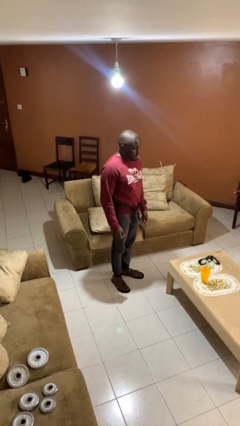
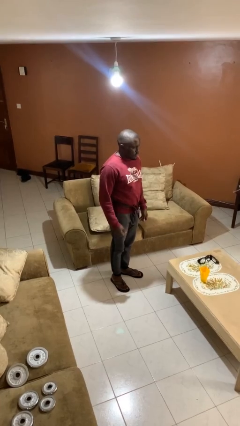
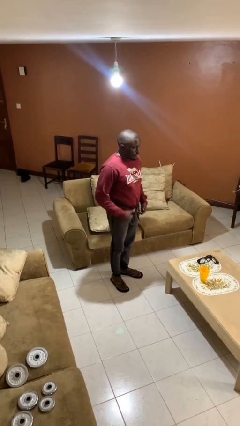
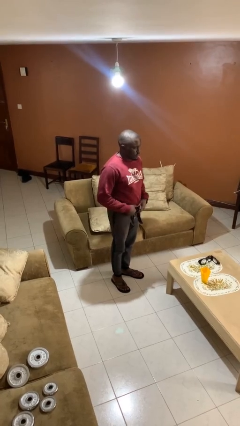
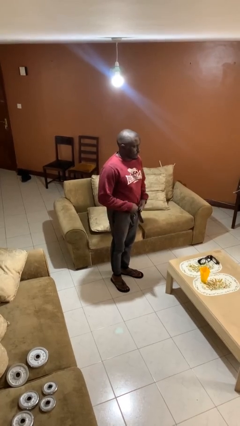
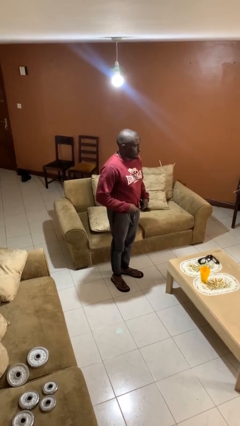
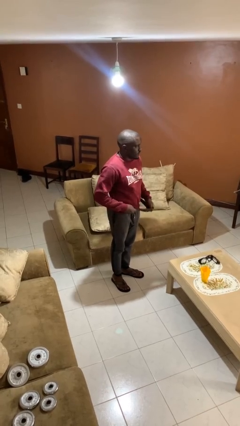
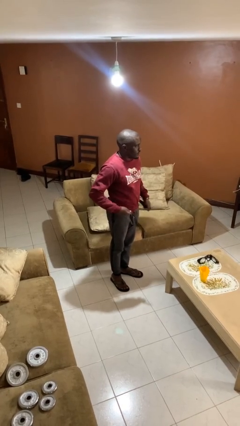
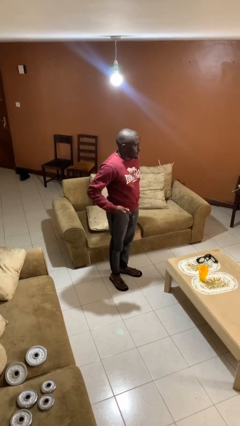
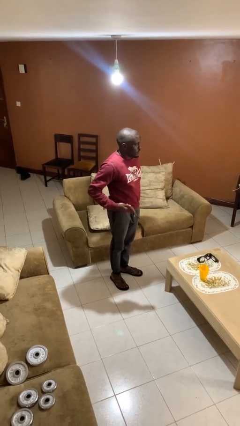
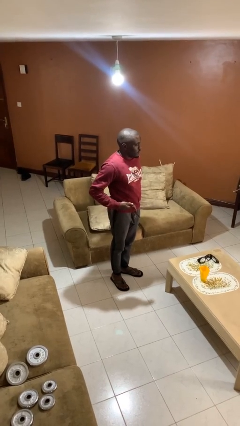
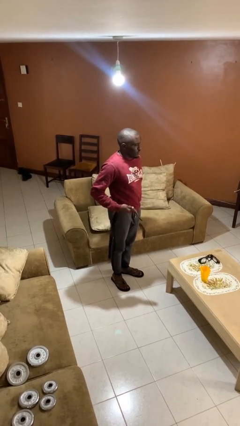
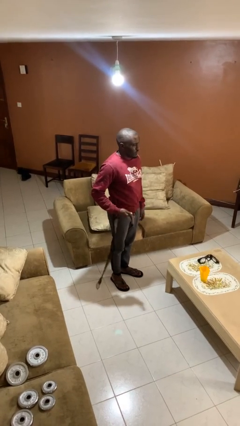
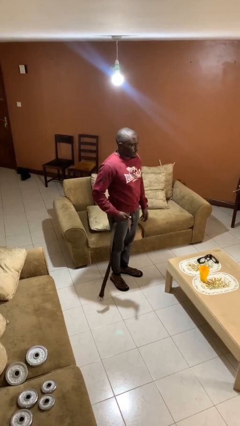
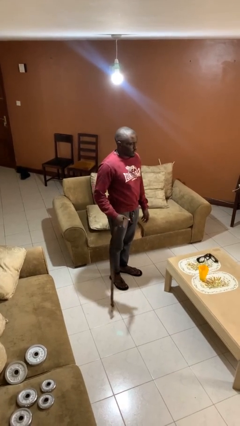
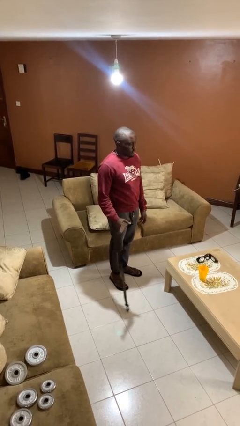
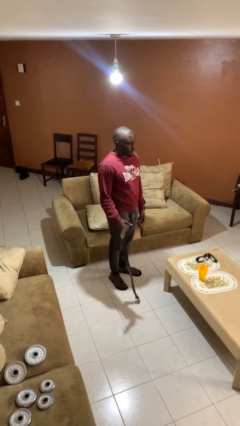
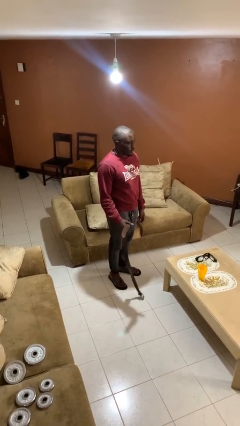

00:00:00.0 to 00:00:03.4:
person takes off belt

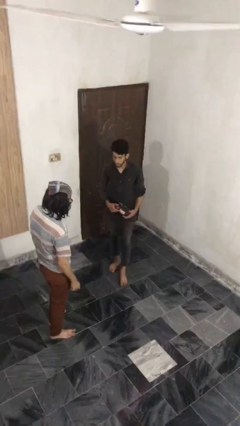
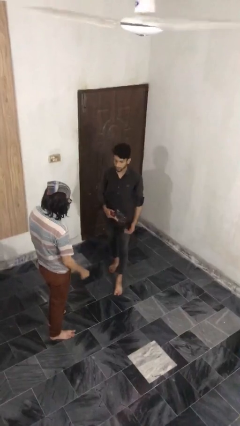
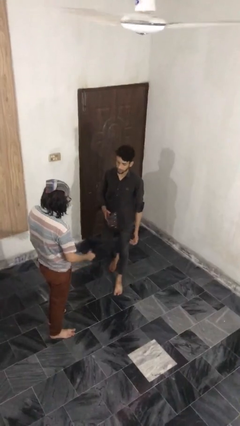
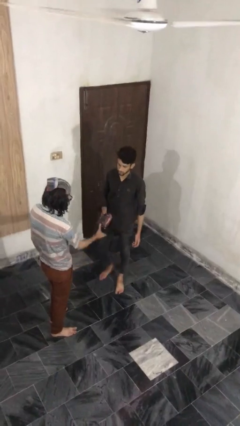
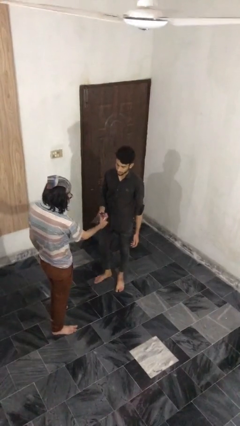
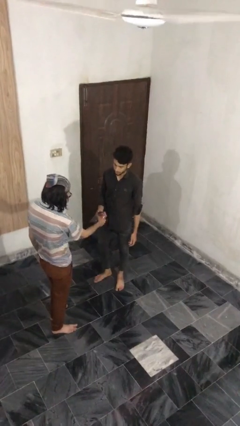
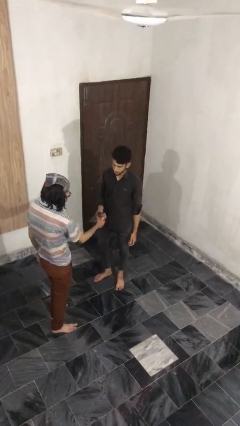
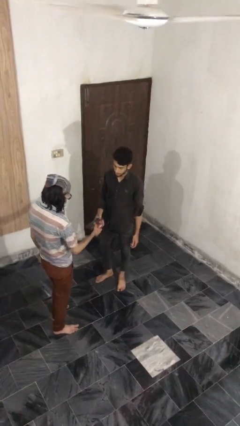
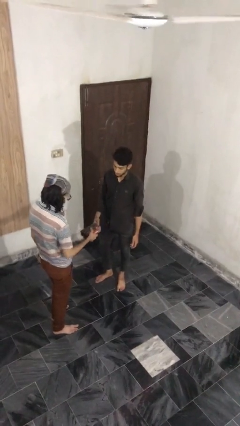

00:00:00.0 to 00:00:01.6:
person transfers object to person

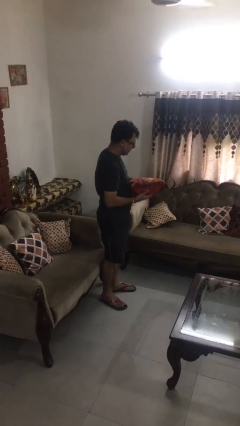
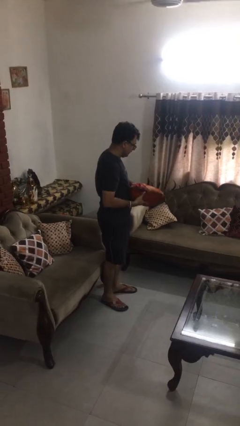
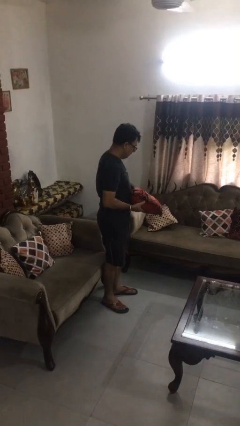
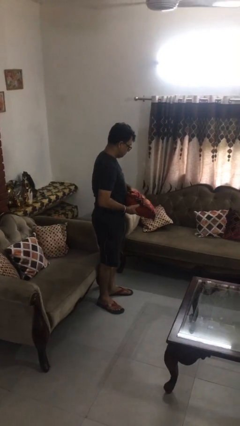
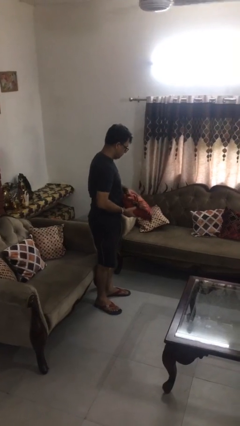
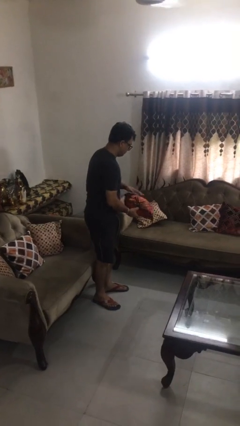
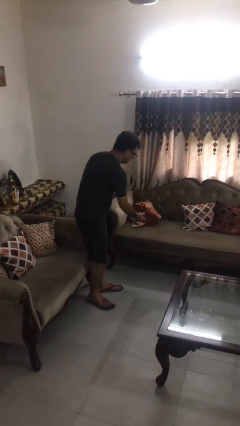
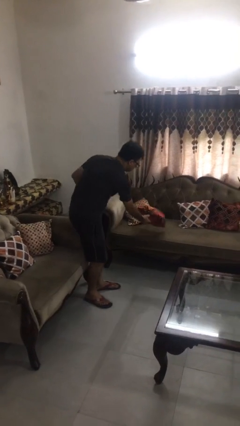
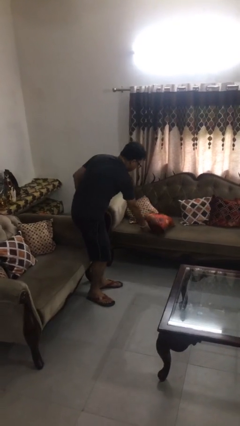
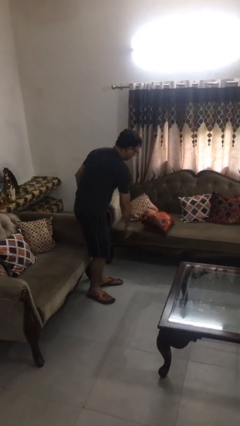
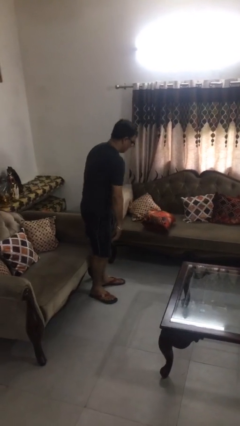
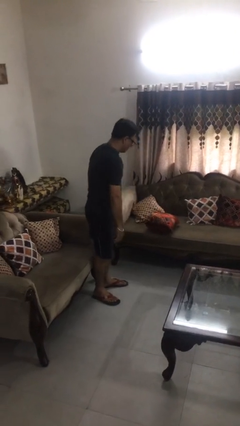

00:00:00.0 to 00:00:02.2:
person puts down object on couch

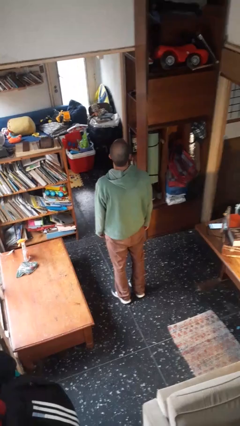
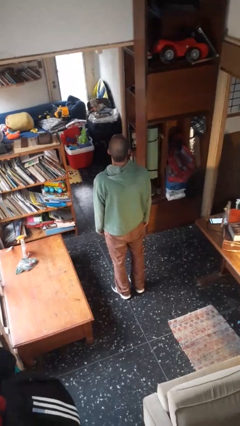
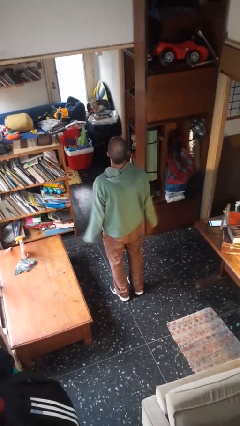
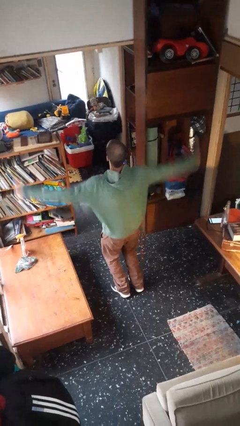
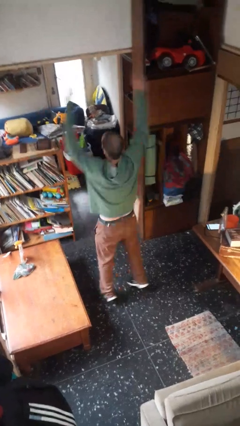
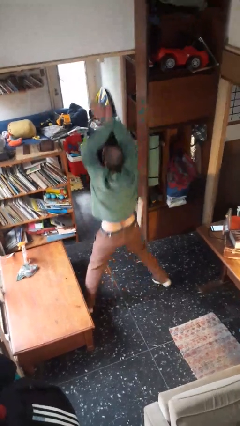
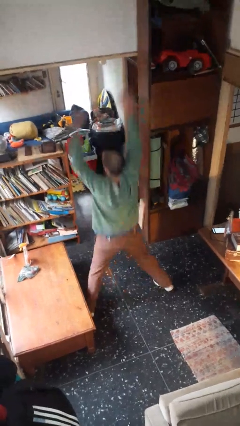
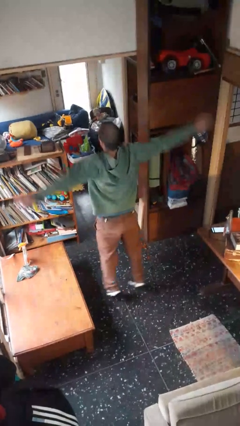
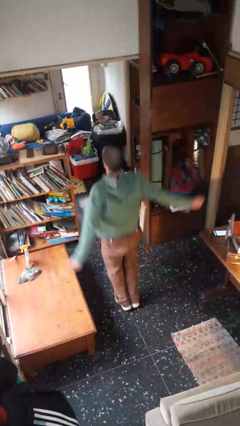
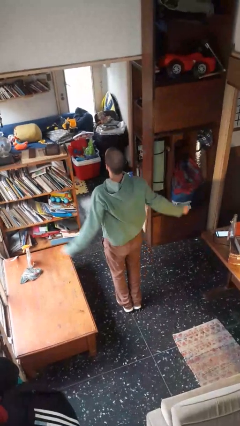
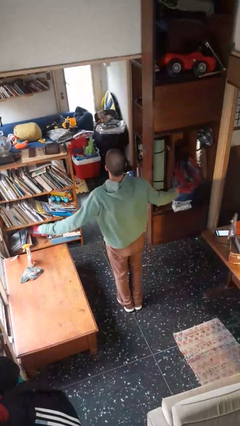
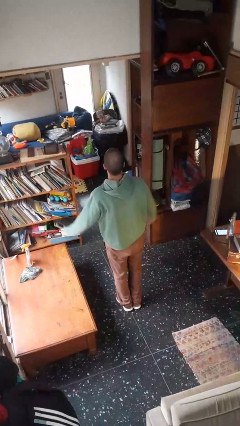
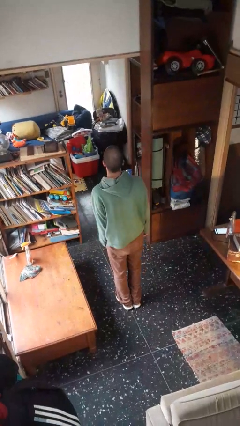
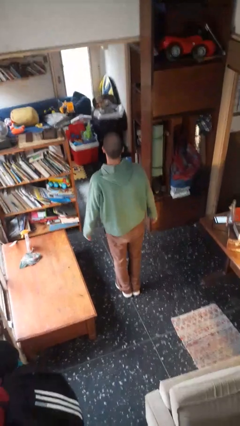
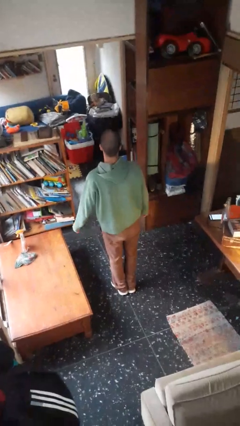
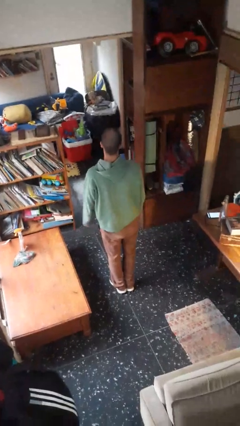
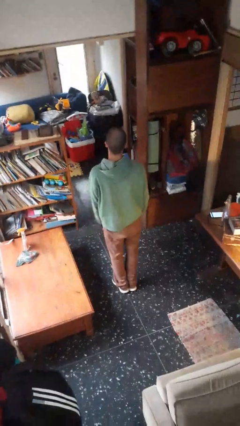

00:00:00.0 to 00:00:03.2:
person exercises with jumping jacks

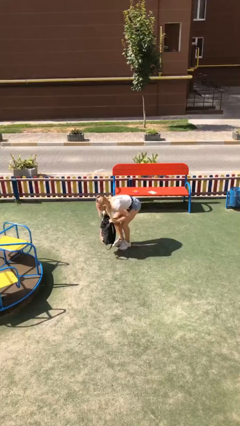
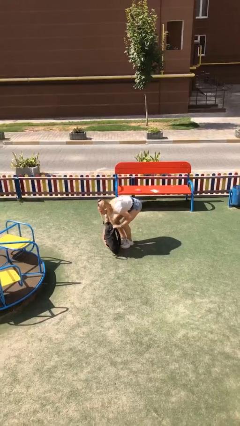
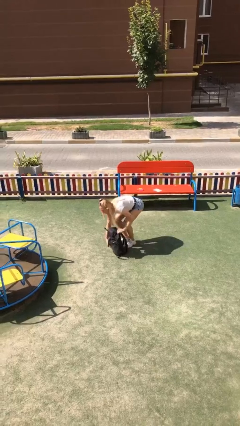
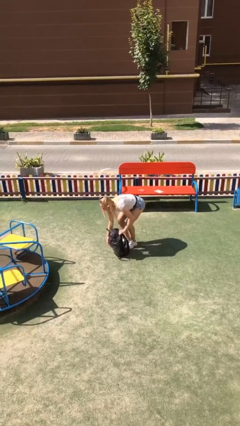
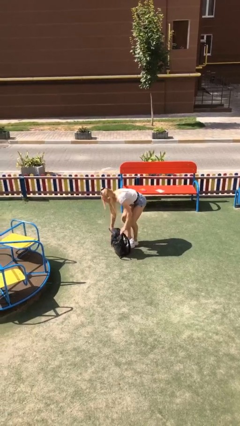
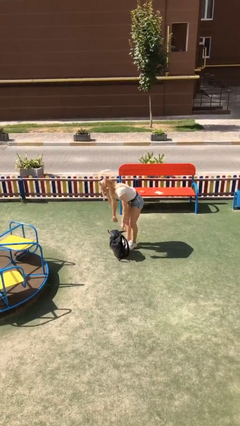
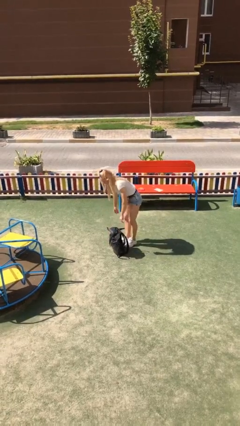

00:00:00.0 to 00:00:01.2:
person puts down object on floor

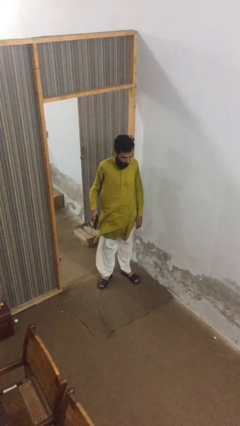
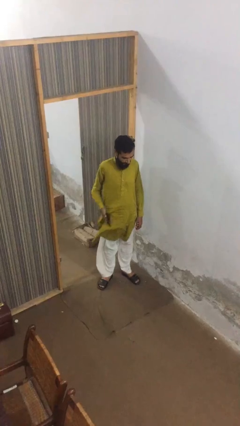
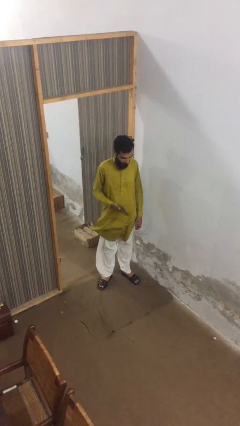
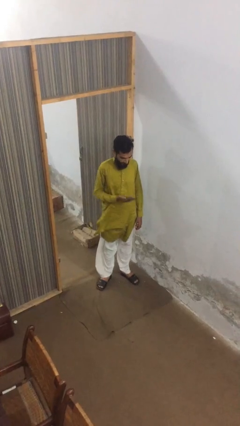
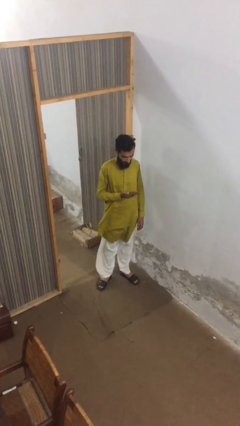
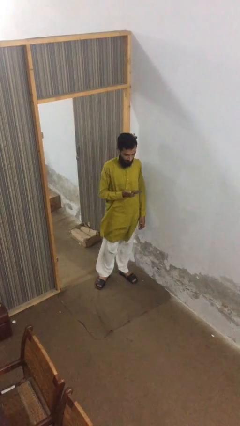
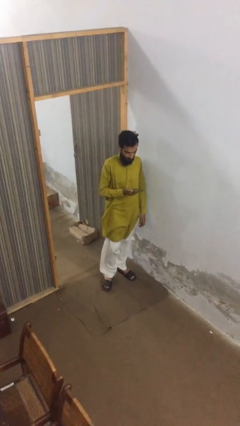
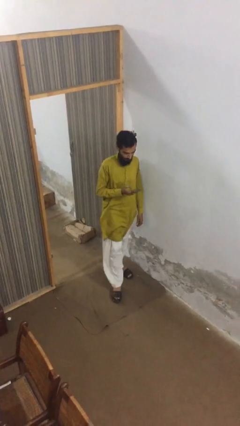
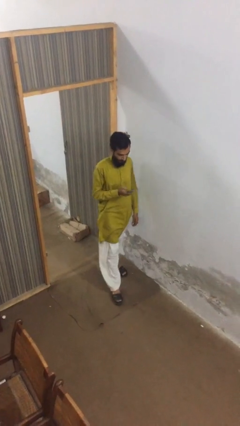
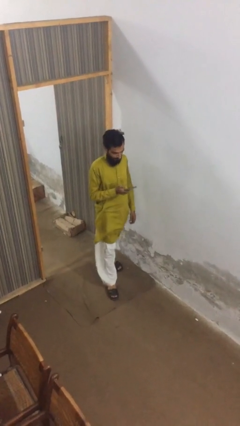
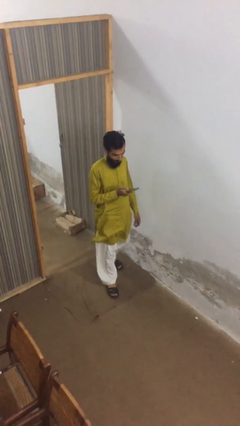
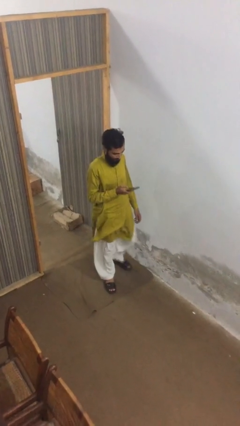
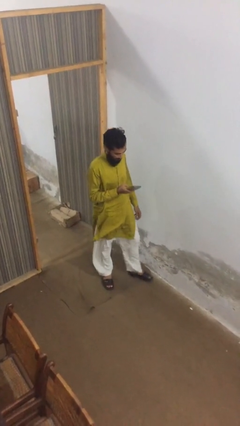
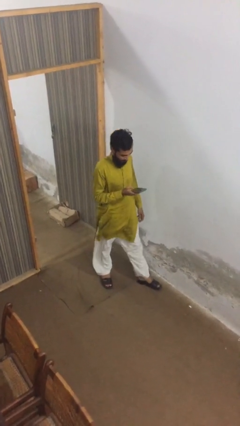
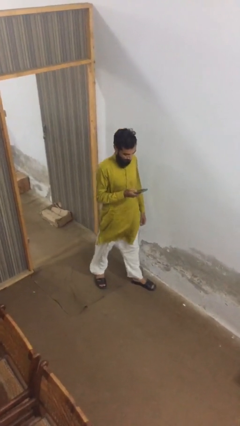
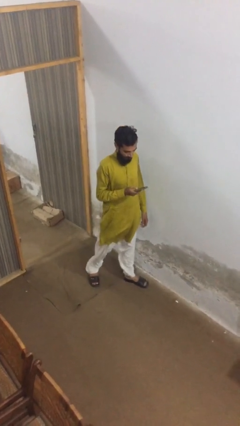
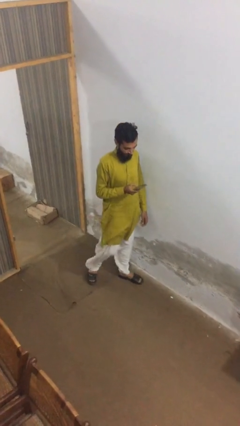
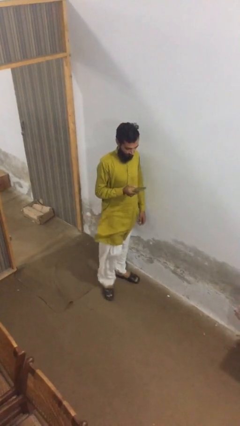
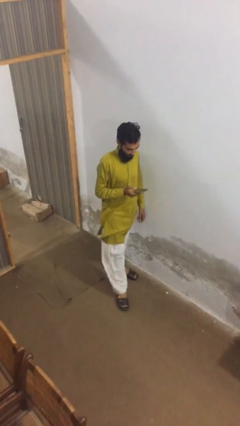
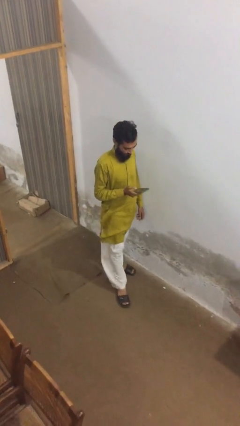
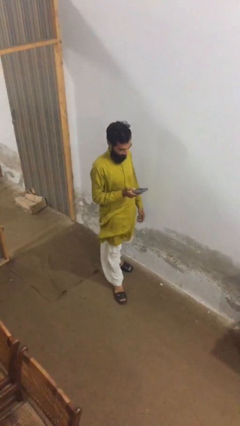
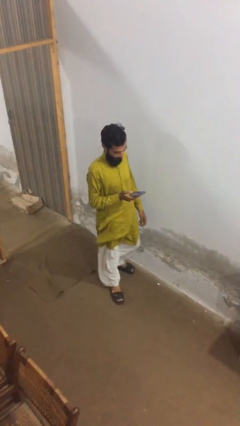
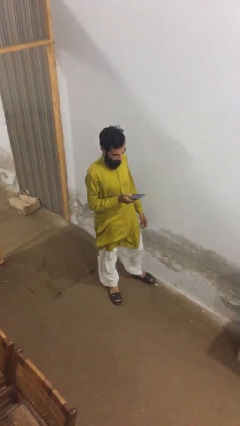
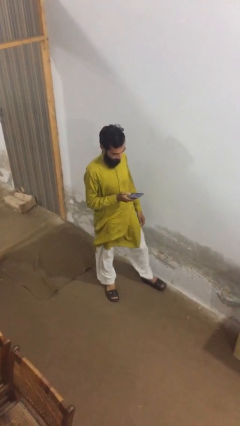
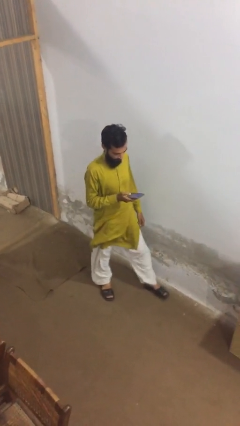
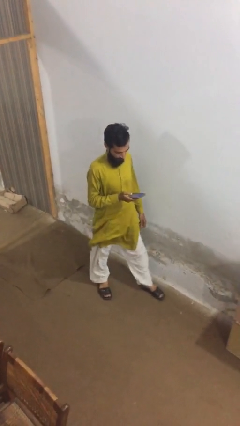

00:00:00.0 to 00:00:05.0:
person texts on phone

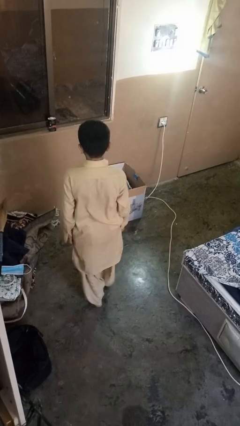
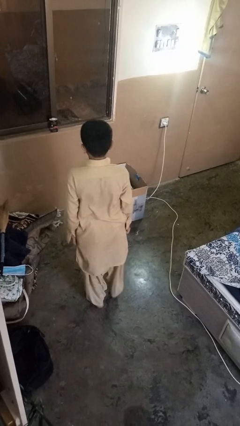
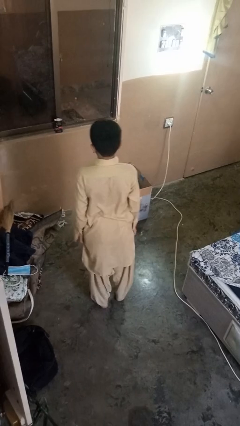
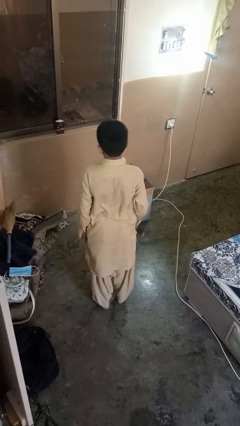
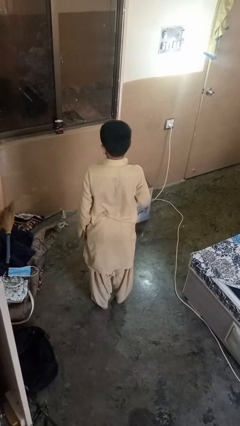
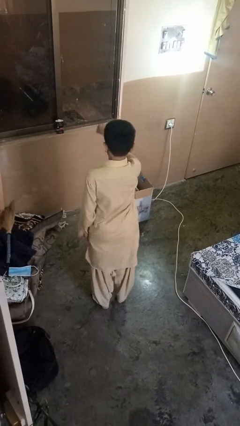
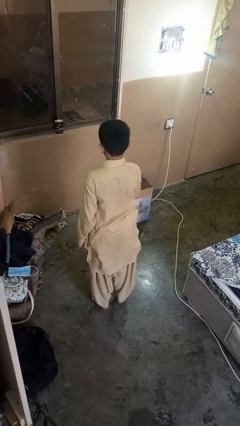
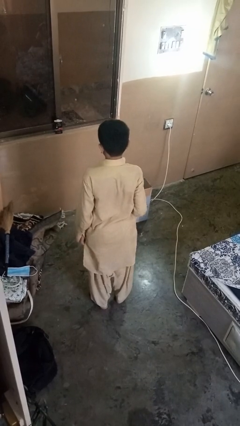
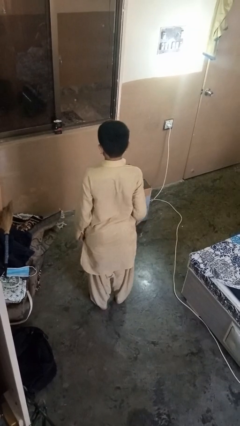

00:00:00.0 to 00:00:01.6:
person karate chop
